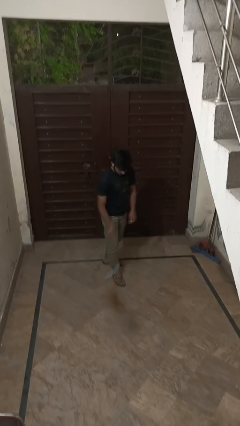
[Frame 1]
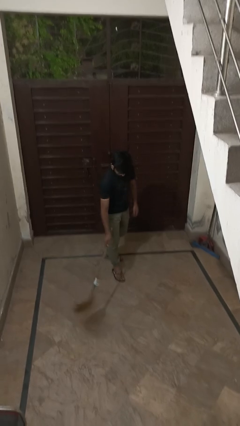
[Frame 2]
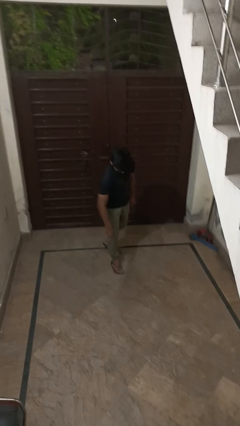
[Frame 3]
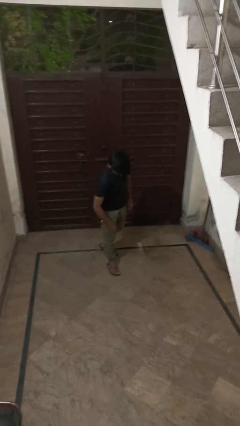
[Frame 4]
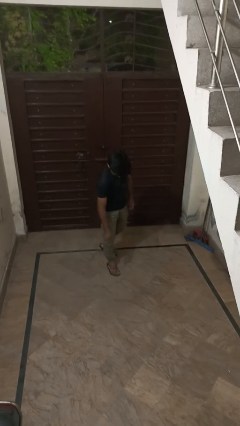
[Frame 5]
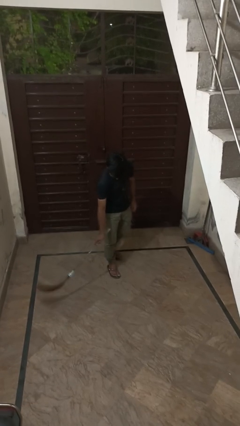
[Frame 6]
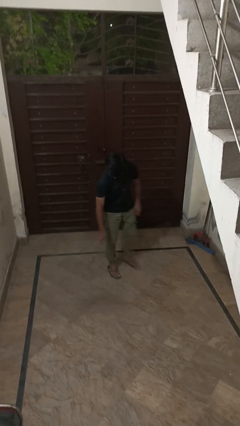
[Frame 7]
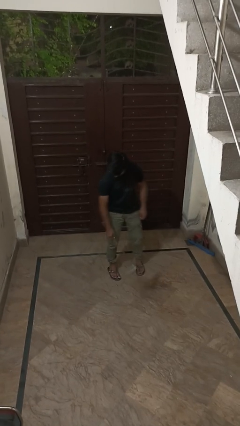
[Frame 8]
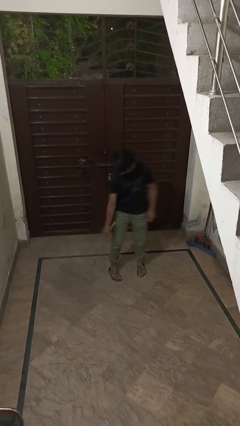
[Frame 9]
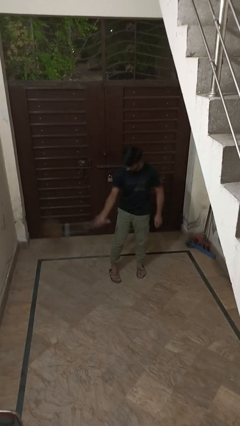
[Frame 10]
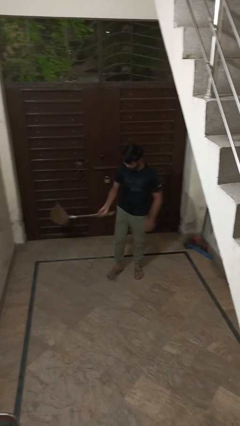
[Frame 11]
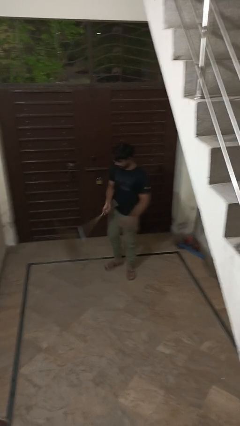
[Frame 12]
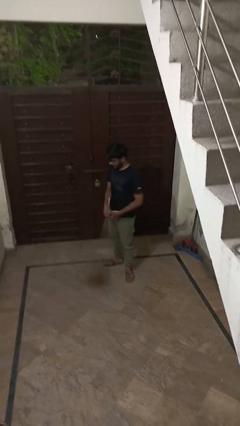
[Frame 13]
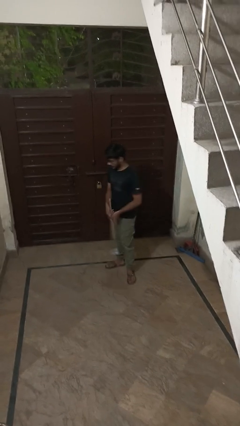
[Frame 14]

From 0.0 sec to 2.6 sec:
person sweeps floor

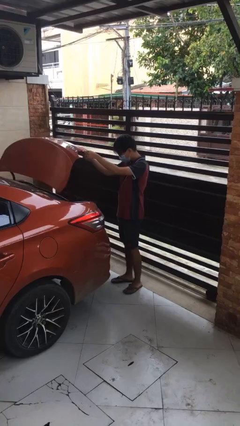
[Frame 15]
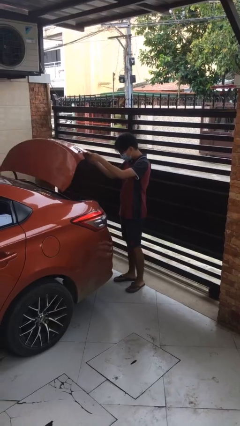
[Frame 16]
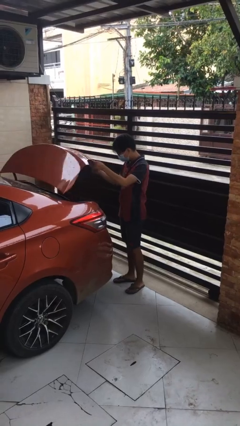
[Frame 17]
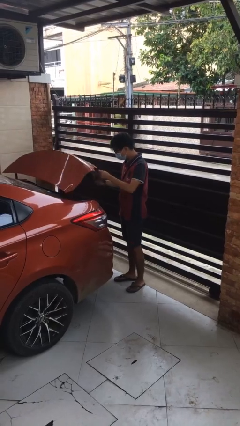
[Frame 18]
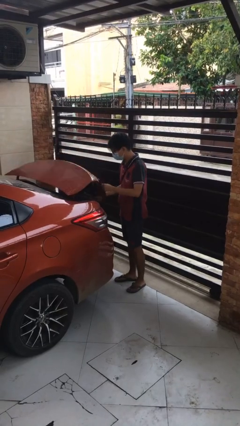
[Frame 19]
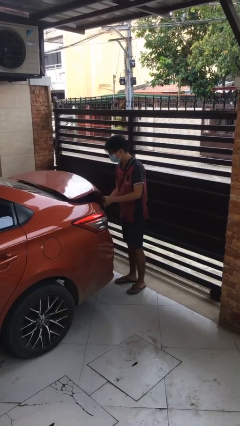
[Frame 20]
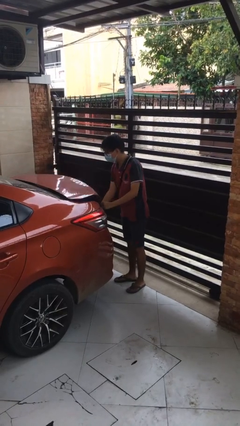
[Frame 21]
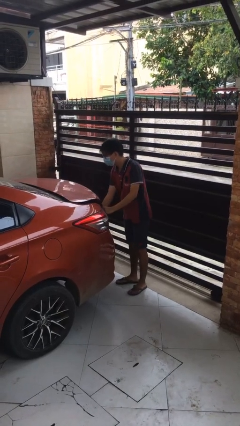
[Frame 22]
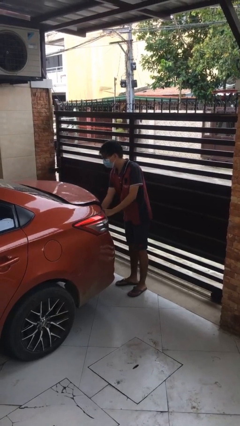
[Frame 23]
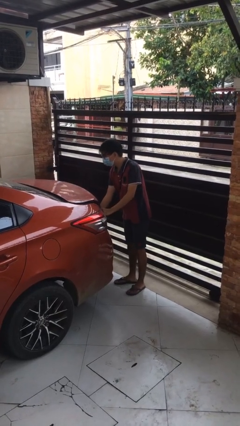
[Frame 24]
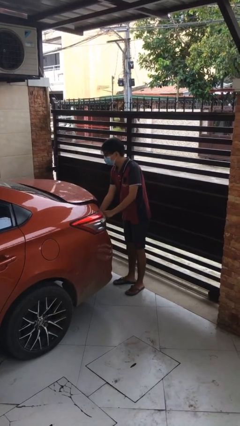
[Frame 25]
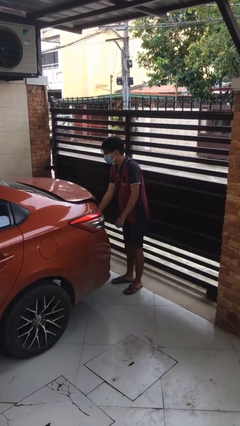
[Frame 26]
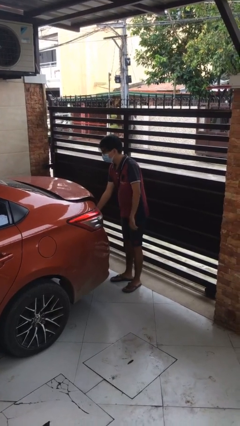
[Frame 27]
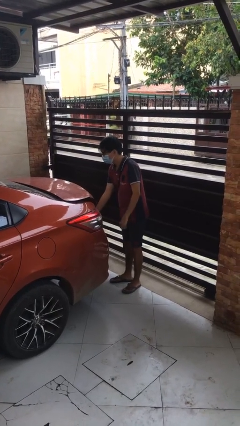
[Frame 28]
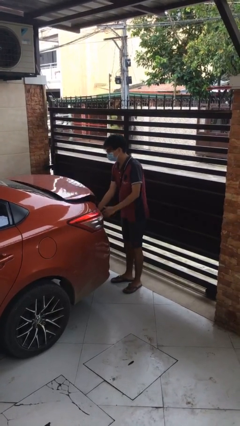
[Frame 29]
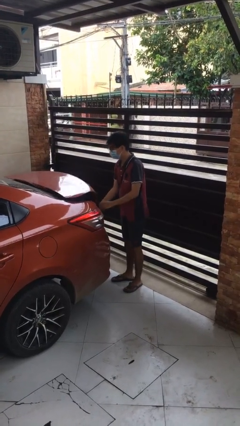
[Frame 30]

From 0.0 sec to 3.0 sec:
person closes car trunk

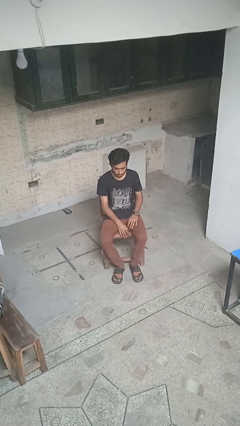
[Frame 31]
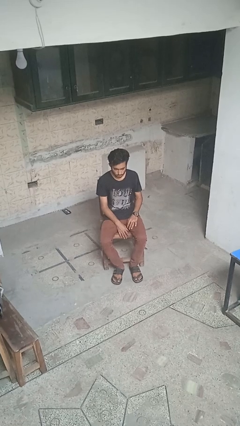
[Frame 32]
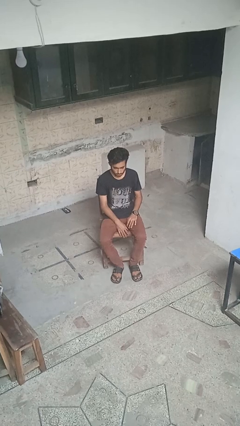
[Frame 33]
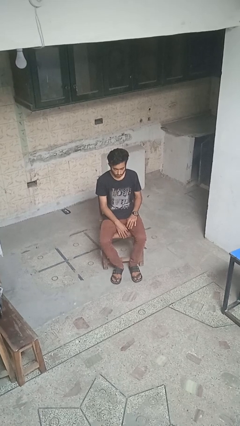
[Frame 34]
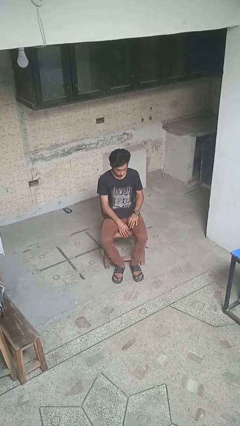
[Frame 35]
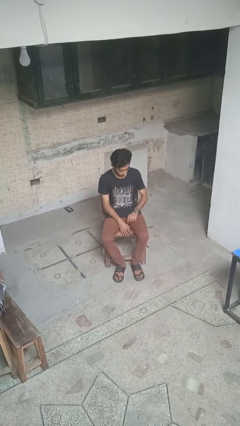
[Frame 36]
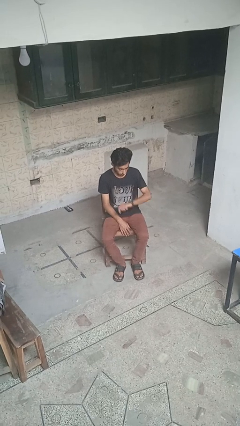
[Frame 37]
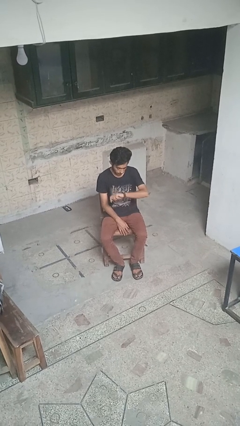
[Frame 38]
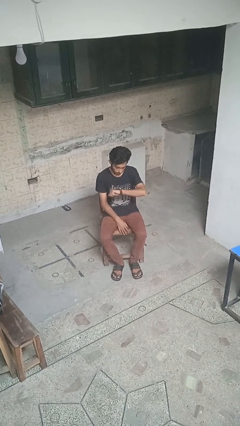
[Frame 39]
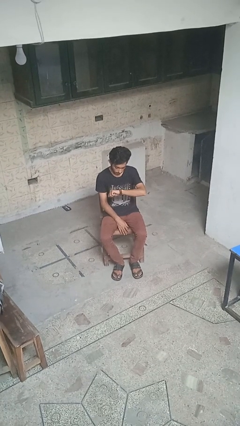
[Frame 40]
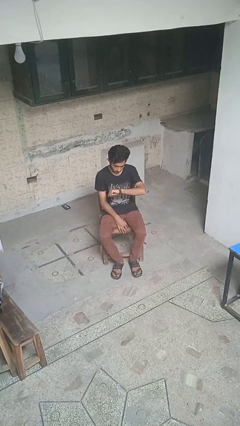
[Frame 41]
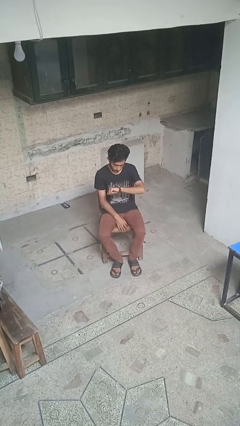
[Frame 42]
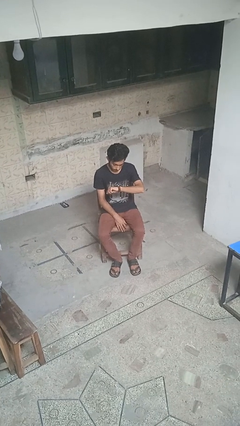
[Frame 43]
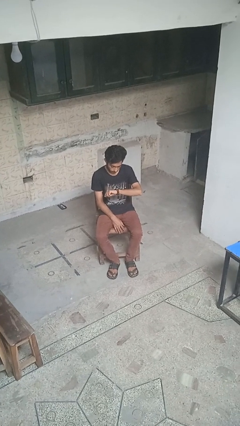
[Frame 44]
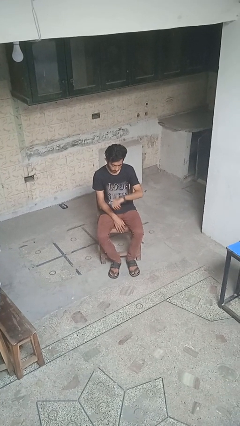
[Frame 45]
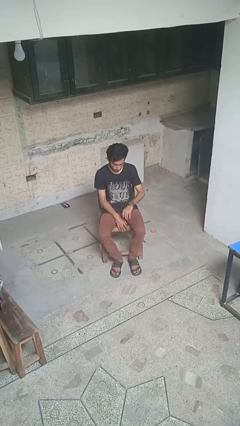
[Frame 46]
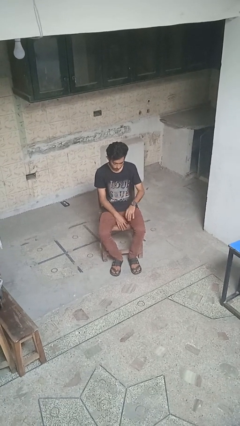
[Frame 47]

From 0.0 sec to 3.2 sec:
person looks at wristwatch

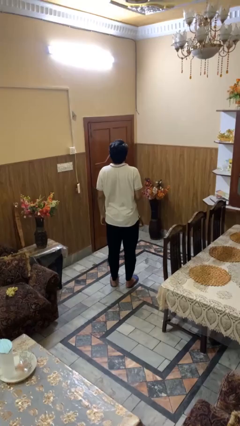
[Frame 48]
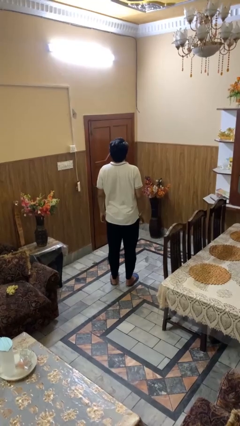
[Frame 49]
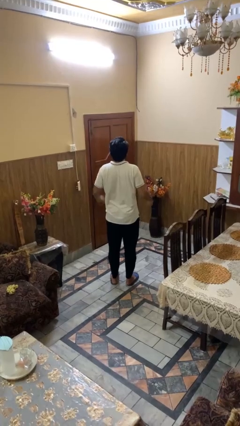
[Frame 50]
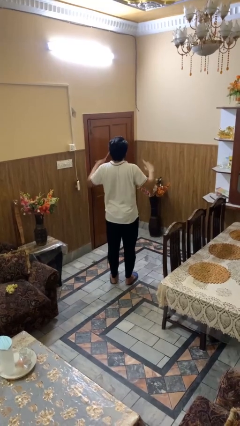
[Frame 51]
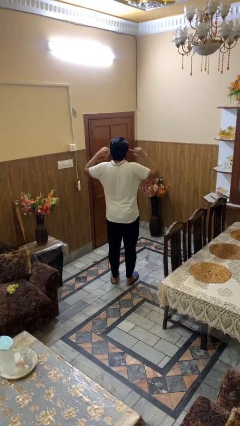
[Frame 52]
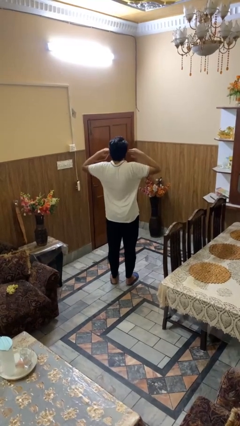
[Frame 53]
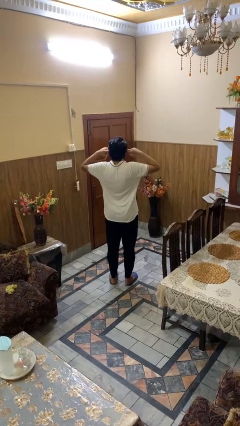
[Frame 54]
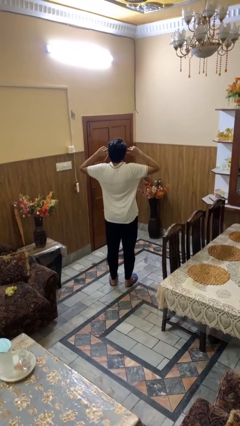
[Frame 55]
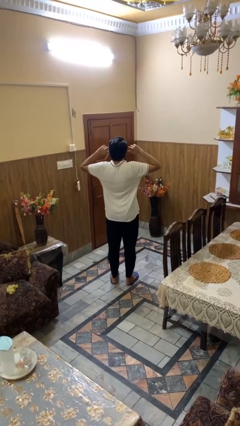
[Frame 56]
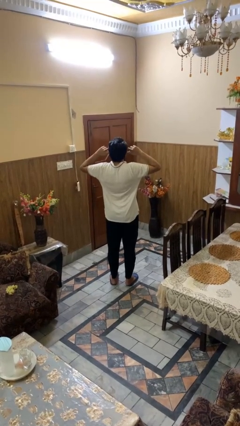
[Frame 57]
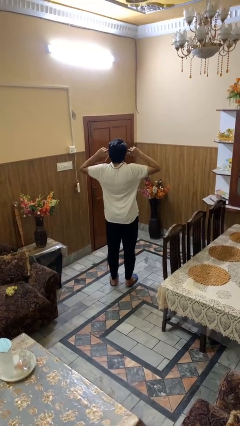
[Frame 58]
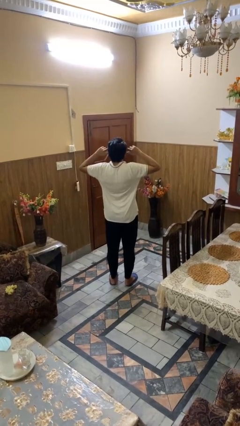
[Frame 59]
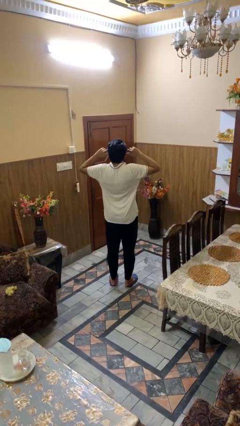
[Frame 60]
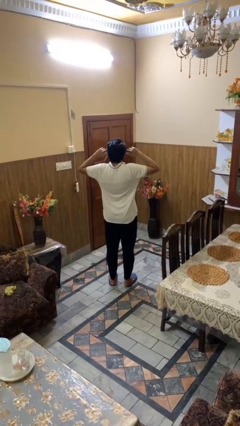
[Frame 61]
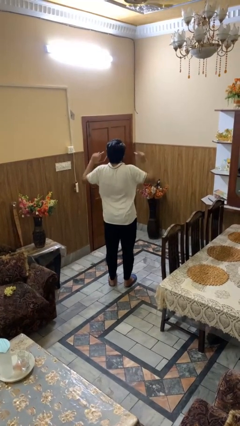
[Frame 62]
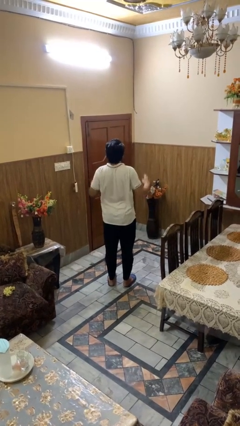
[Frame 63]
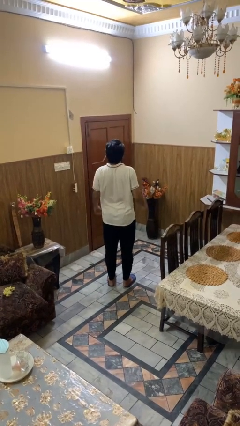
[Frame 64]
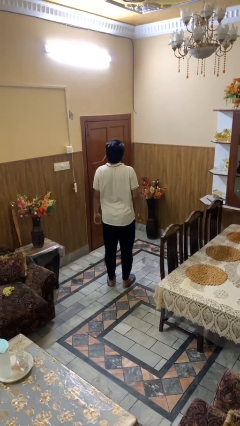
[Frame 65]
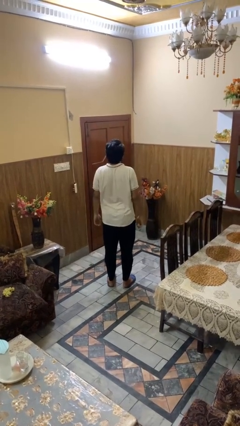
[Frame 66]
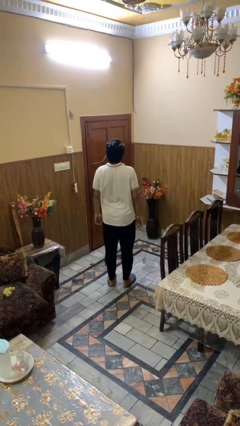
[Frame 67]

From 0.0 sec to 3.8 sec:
person puts fingers in ear

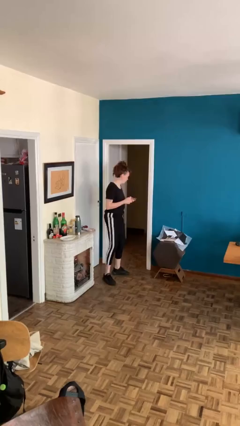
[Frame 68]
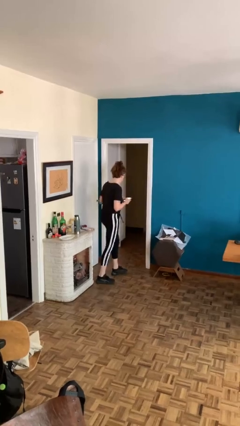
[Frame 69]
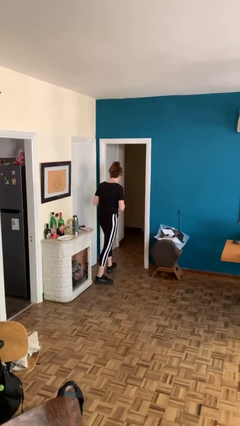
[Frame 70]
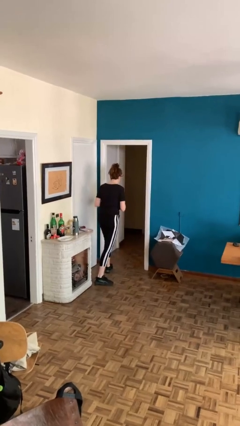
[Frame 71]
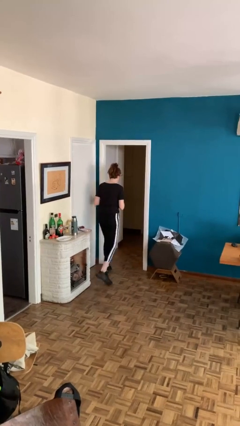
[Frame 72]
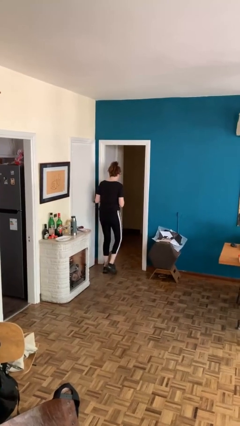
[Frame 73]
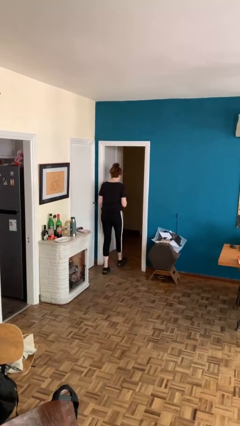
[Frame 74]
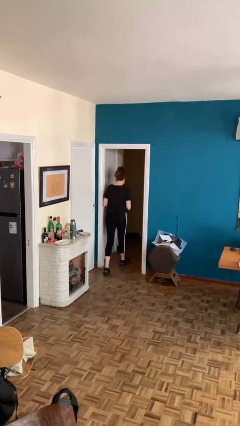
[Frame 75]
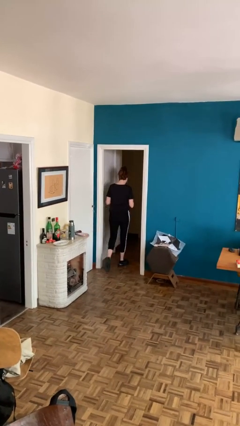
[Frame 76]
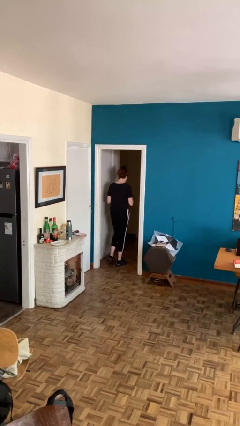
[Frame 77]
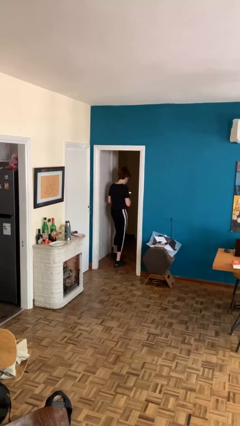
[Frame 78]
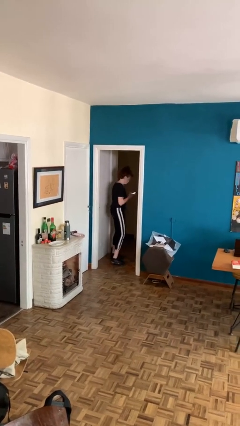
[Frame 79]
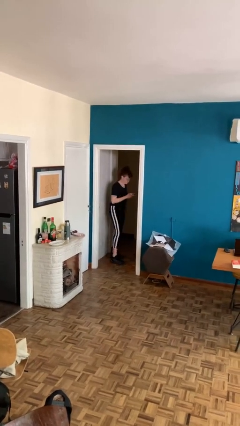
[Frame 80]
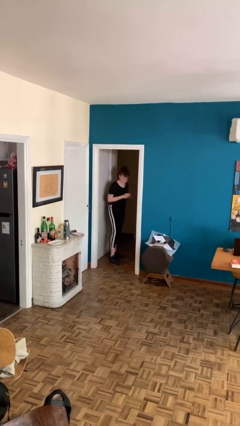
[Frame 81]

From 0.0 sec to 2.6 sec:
person exits scene through structure

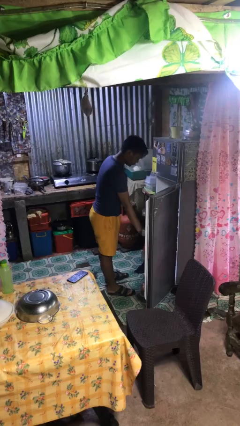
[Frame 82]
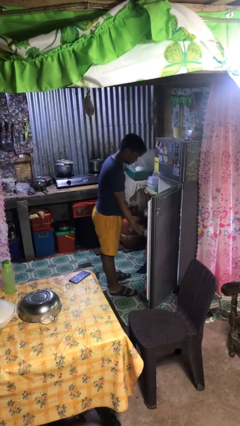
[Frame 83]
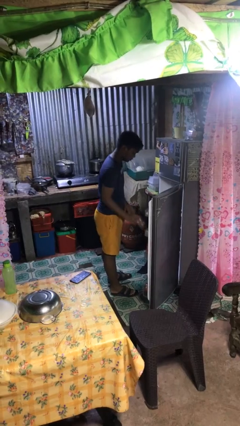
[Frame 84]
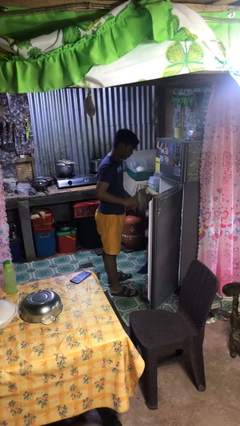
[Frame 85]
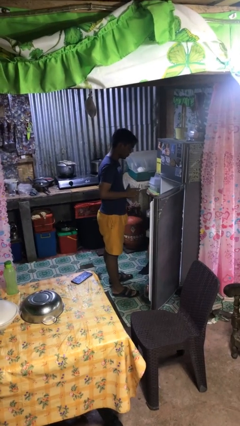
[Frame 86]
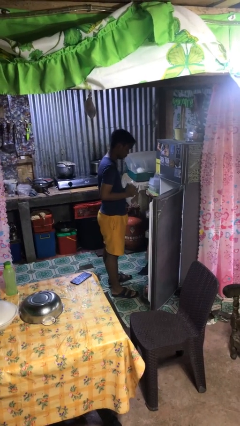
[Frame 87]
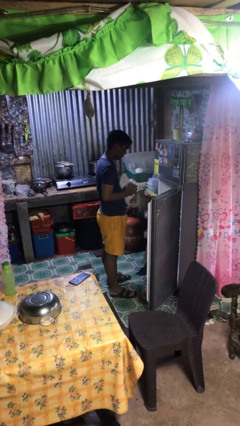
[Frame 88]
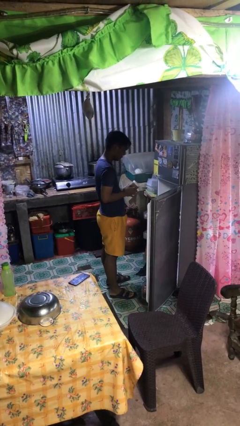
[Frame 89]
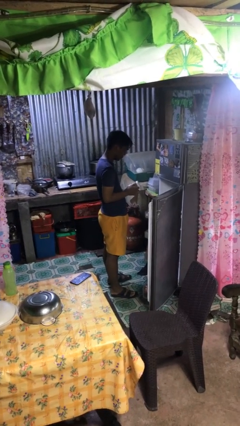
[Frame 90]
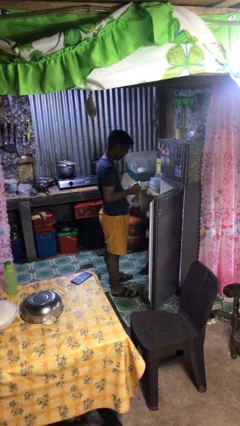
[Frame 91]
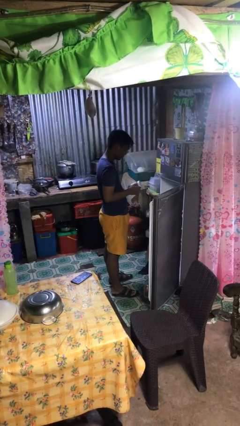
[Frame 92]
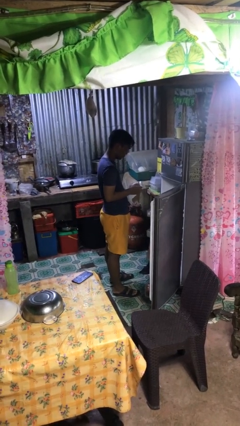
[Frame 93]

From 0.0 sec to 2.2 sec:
person takes object from refrigerator
